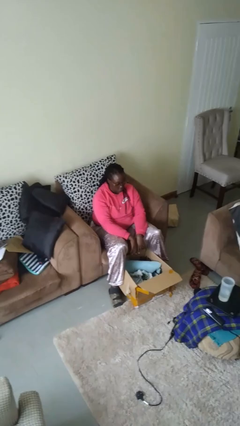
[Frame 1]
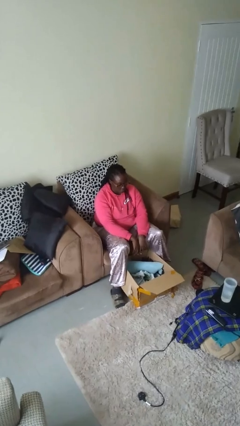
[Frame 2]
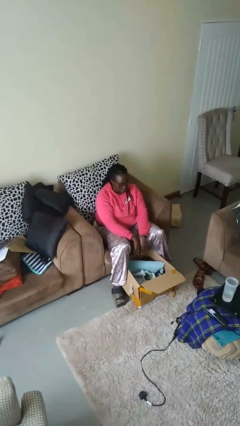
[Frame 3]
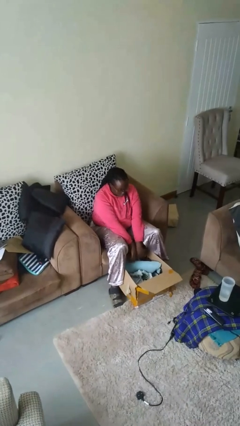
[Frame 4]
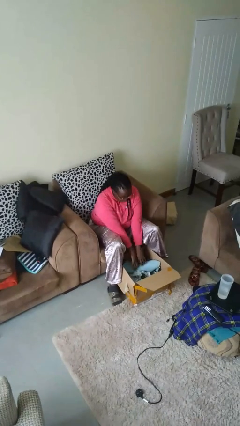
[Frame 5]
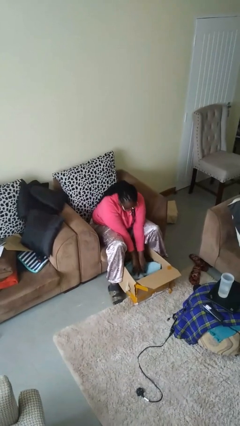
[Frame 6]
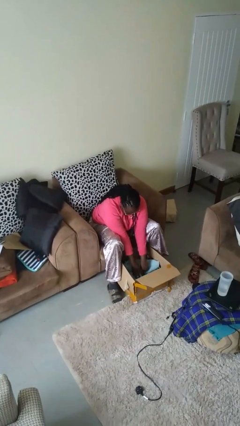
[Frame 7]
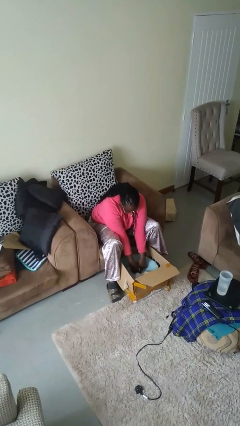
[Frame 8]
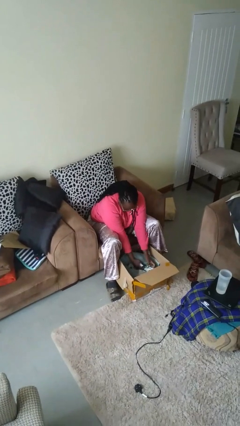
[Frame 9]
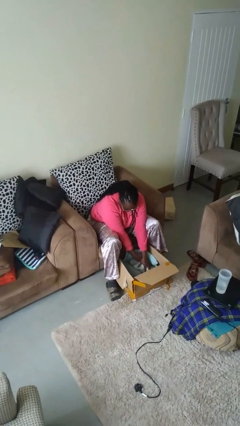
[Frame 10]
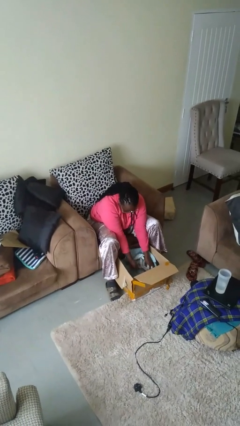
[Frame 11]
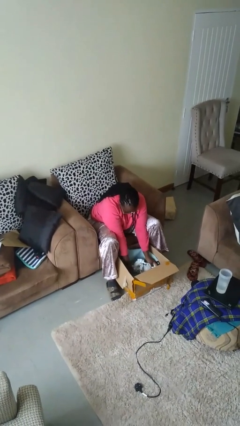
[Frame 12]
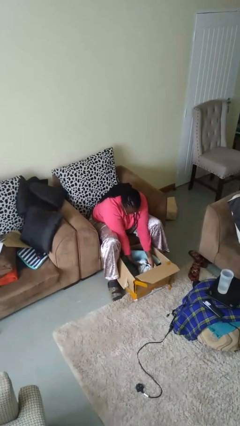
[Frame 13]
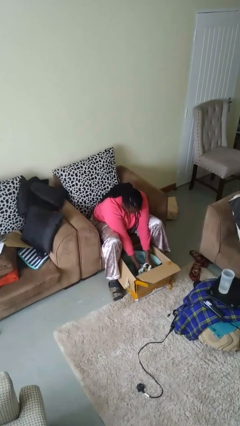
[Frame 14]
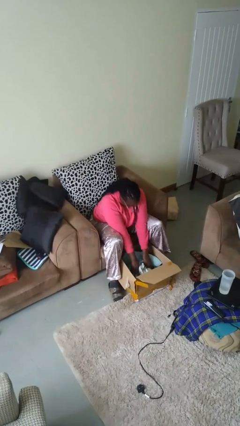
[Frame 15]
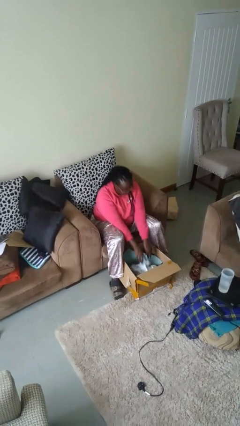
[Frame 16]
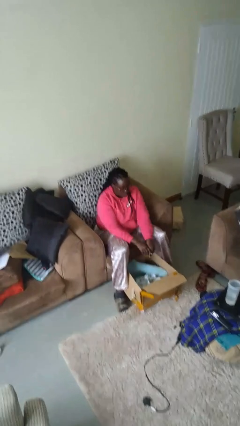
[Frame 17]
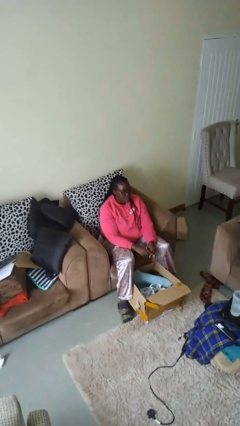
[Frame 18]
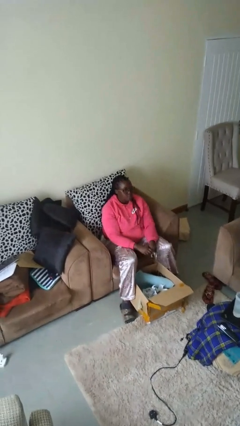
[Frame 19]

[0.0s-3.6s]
person searches in box

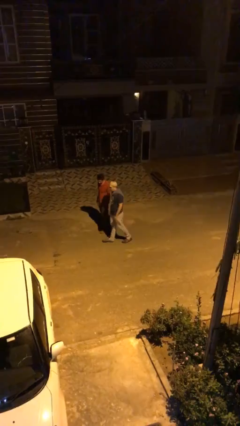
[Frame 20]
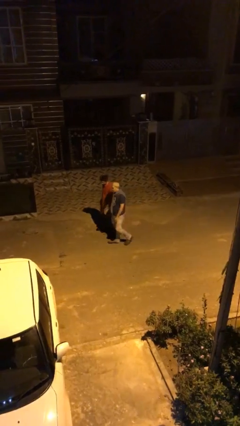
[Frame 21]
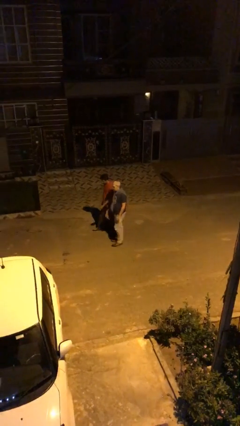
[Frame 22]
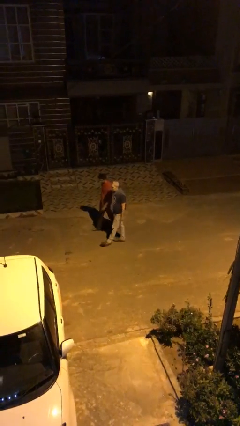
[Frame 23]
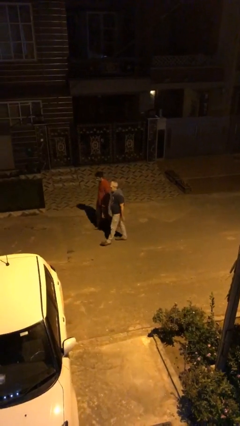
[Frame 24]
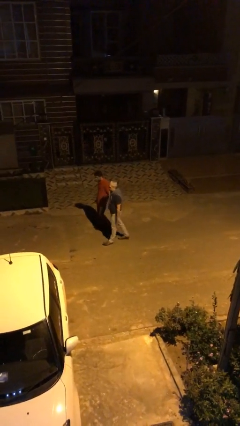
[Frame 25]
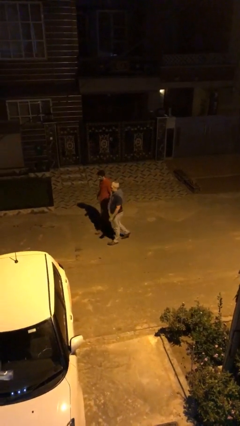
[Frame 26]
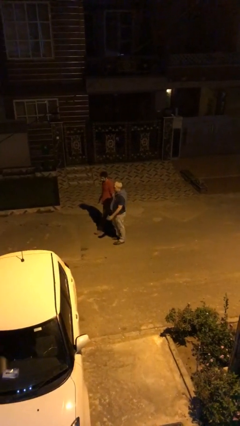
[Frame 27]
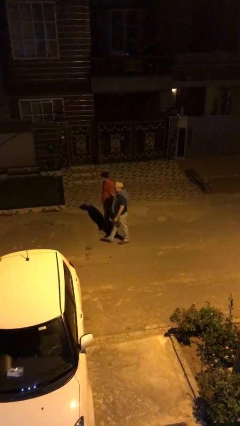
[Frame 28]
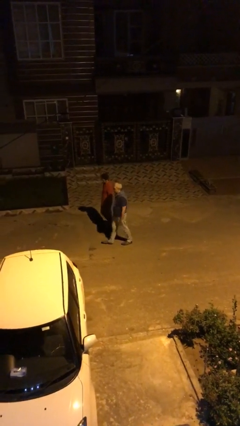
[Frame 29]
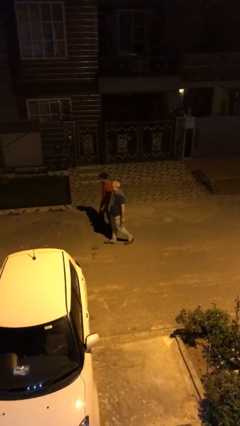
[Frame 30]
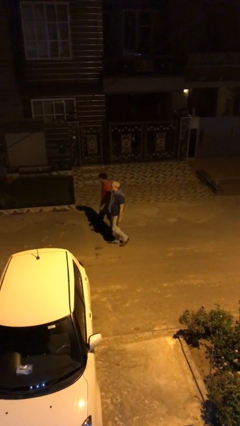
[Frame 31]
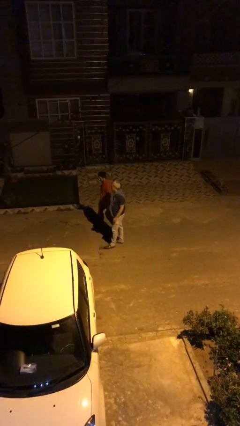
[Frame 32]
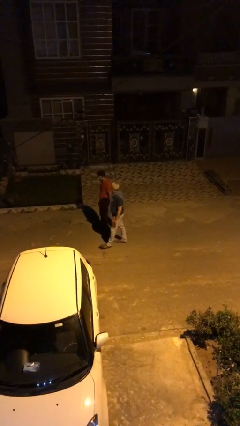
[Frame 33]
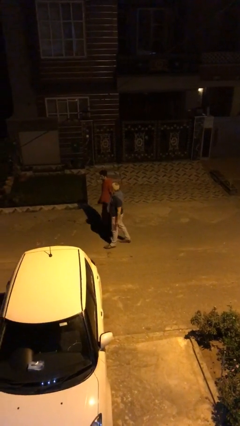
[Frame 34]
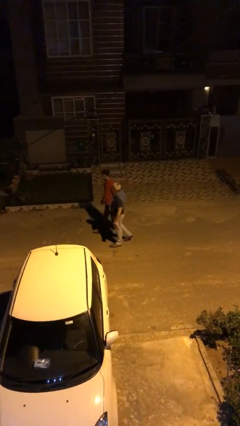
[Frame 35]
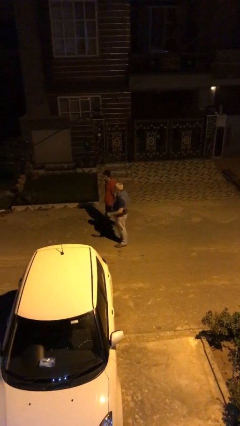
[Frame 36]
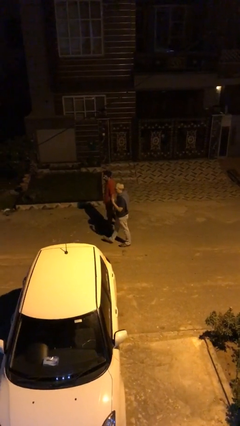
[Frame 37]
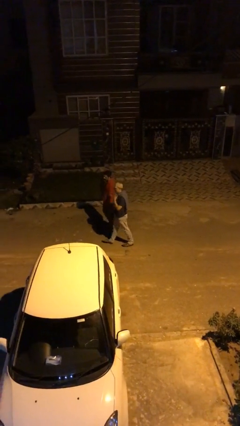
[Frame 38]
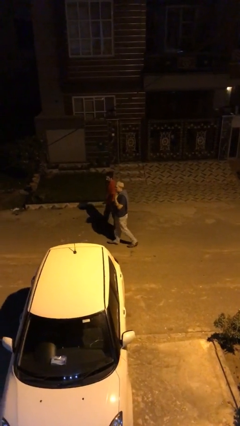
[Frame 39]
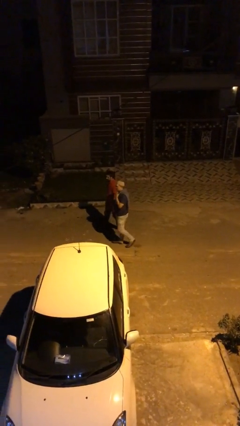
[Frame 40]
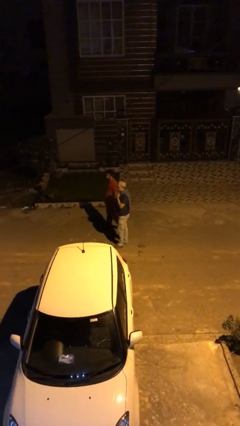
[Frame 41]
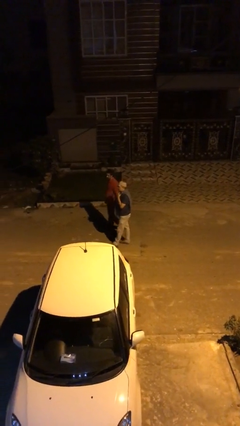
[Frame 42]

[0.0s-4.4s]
person talks to person

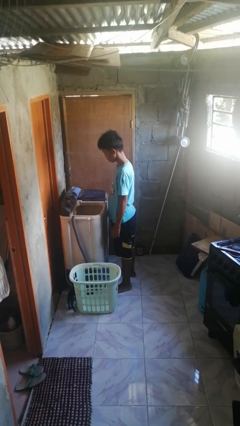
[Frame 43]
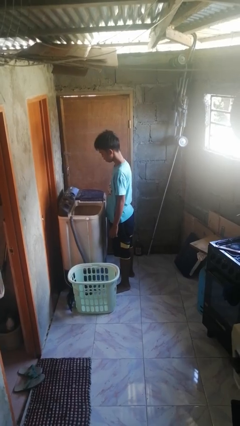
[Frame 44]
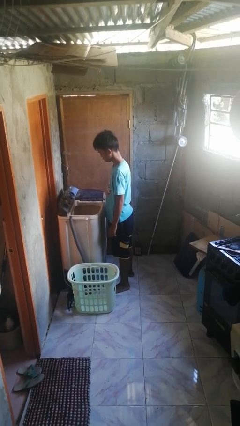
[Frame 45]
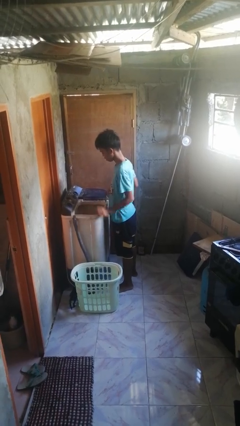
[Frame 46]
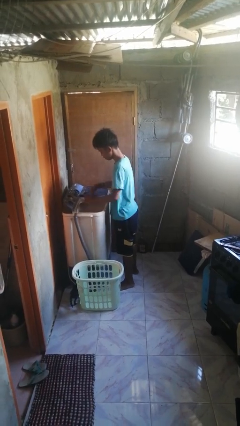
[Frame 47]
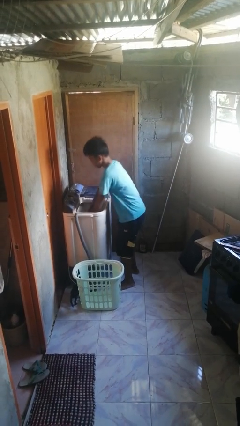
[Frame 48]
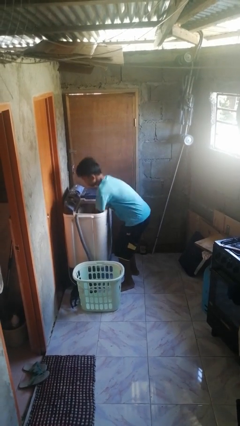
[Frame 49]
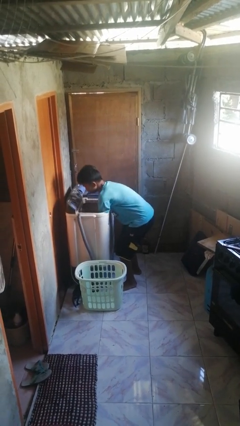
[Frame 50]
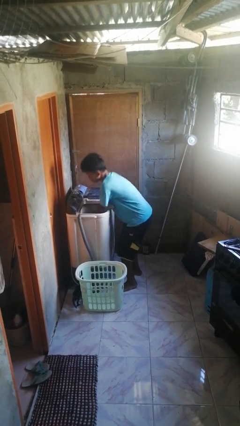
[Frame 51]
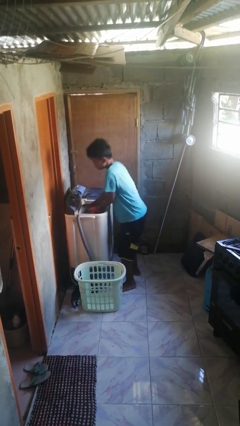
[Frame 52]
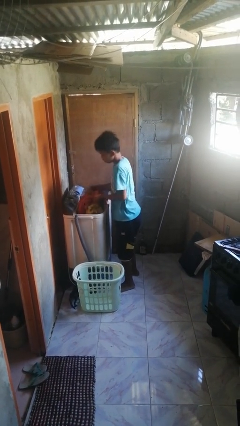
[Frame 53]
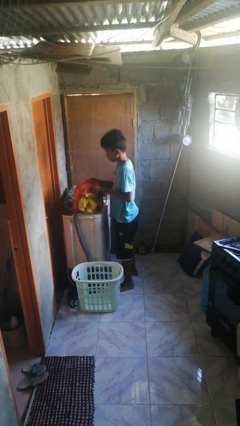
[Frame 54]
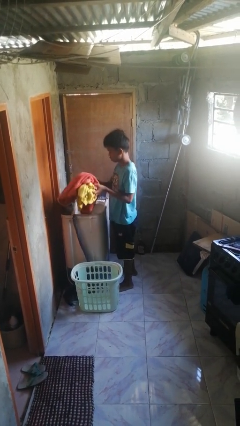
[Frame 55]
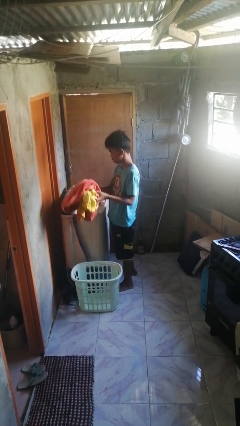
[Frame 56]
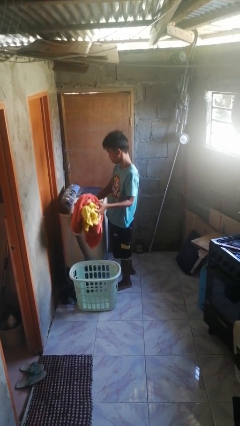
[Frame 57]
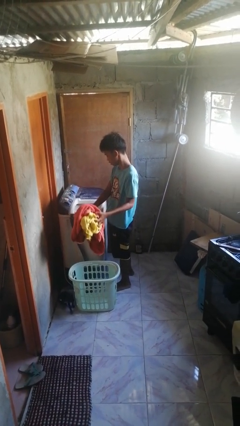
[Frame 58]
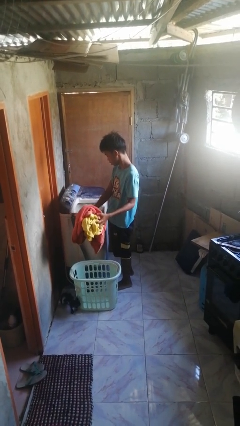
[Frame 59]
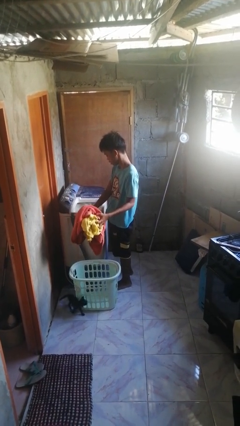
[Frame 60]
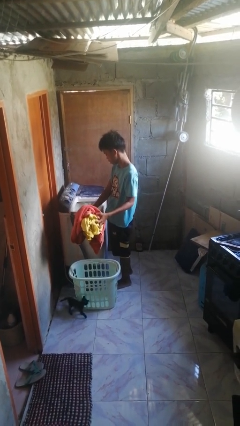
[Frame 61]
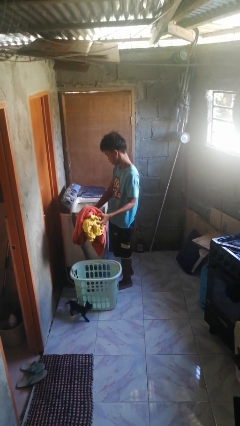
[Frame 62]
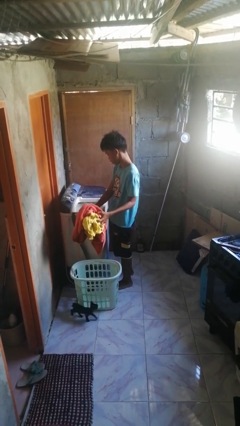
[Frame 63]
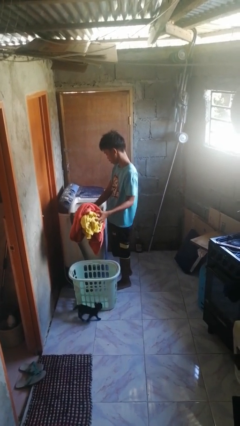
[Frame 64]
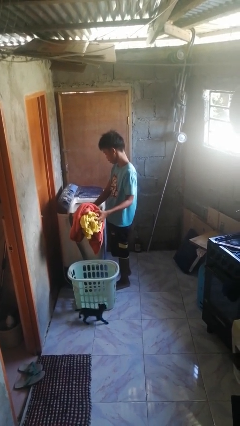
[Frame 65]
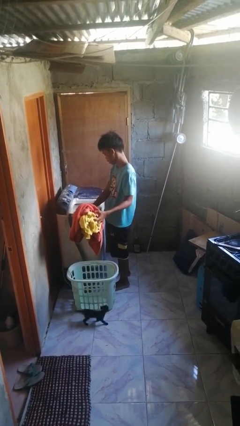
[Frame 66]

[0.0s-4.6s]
person unloads clotheswasher

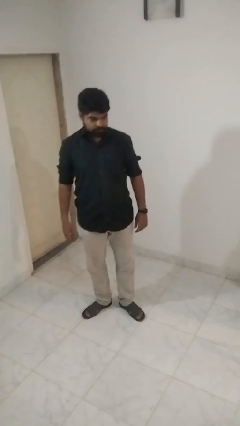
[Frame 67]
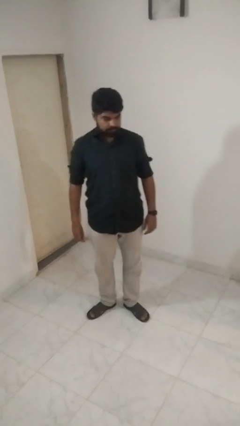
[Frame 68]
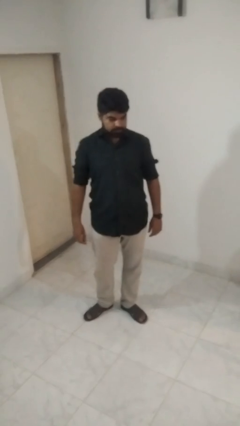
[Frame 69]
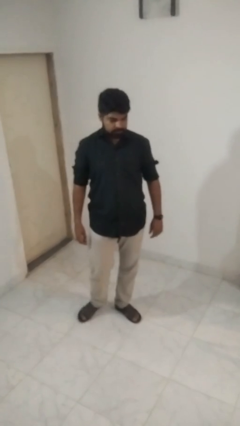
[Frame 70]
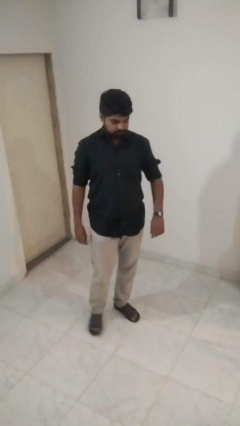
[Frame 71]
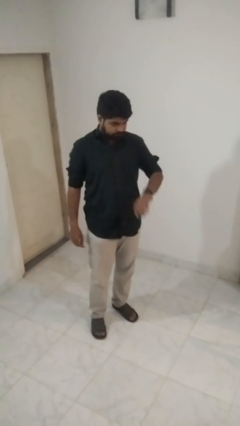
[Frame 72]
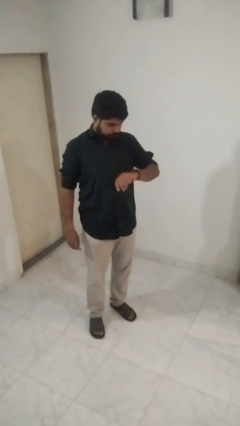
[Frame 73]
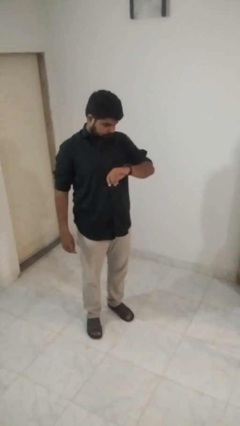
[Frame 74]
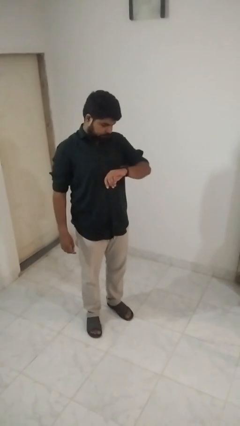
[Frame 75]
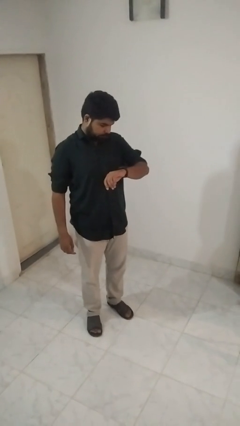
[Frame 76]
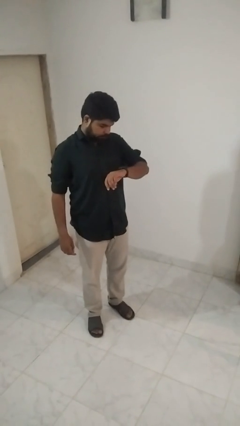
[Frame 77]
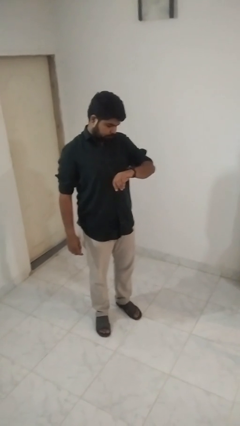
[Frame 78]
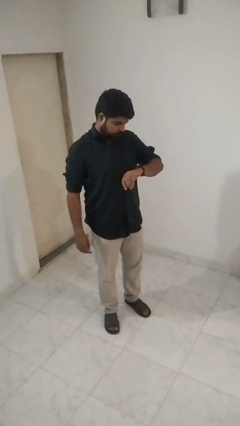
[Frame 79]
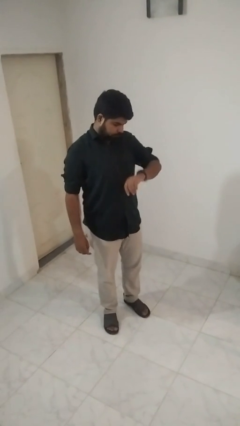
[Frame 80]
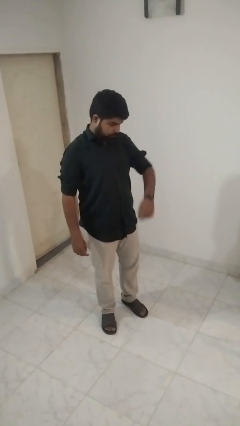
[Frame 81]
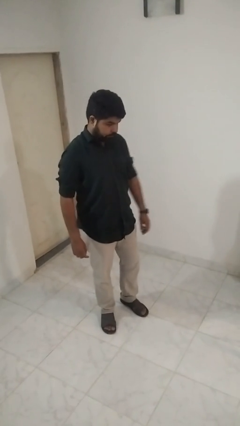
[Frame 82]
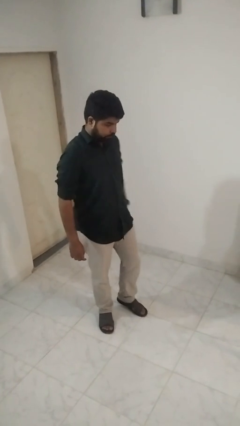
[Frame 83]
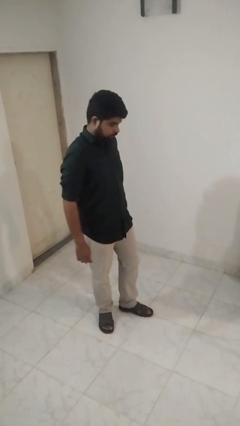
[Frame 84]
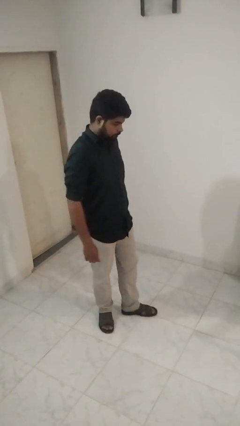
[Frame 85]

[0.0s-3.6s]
person looks at wristwatch

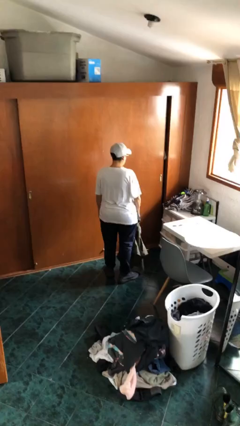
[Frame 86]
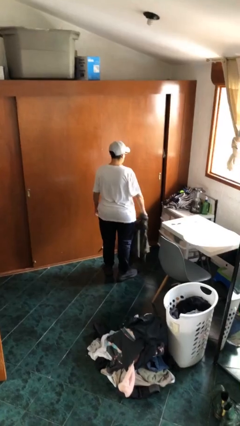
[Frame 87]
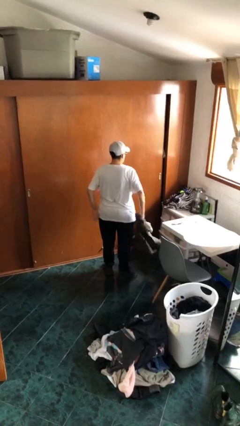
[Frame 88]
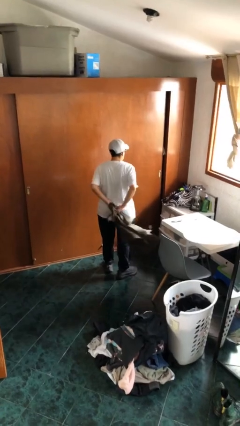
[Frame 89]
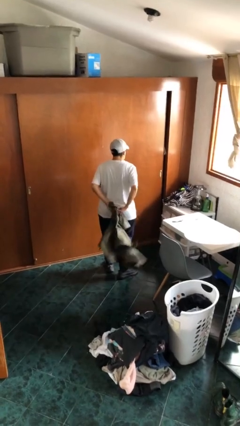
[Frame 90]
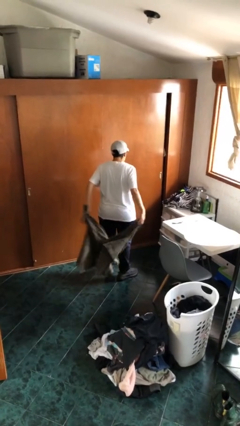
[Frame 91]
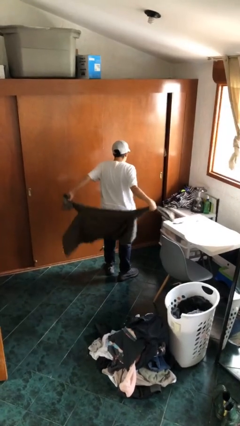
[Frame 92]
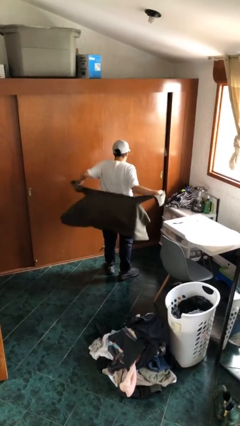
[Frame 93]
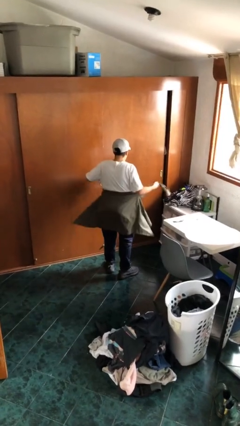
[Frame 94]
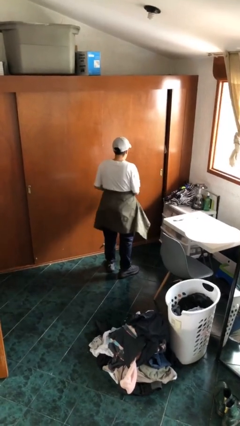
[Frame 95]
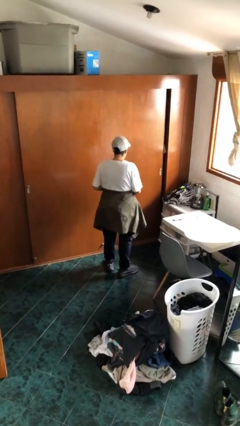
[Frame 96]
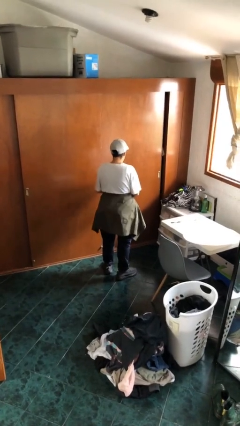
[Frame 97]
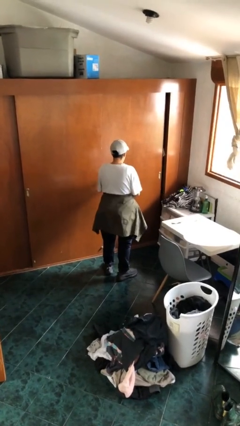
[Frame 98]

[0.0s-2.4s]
person ties jacket around waist
